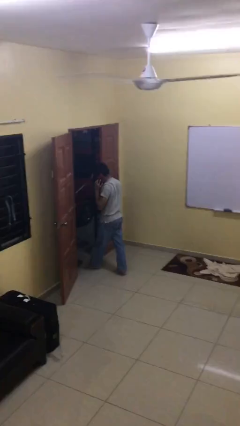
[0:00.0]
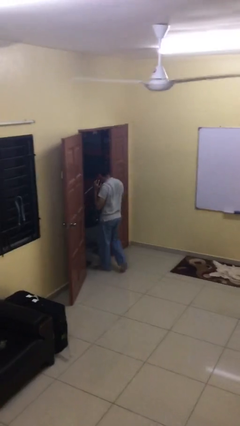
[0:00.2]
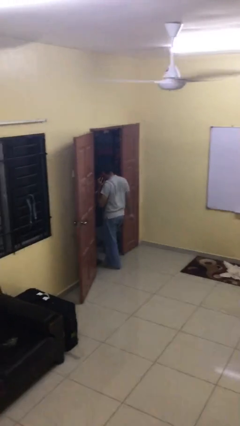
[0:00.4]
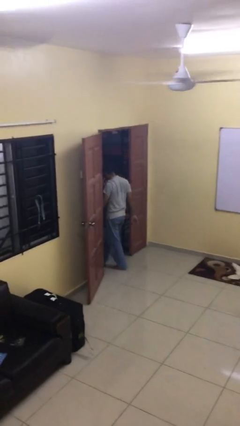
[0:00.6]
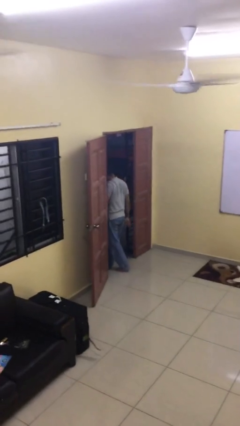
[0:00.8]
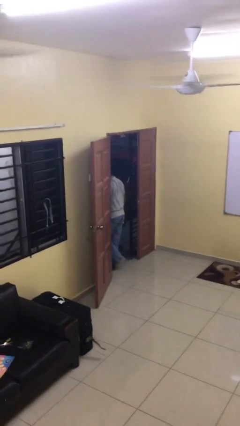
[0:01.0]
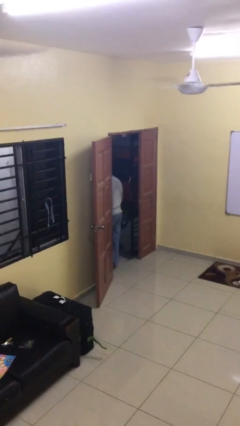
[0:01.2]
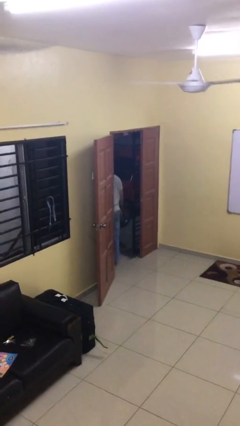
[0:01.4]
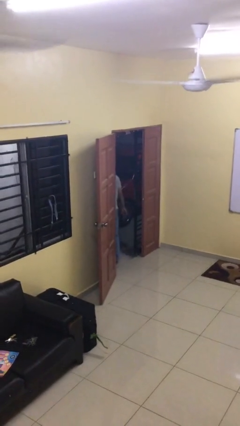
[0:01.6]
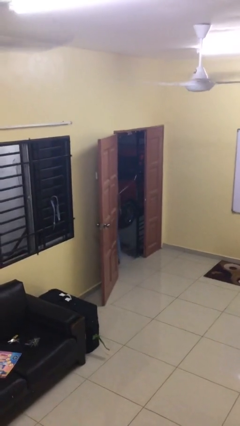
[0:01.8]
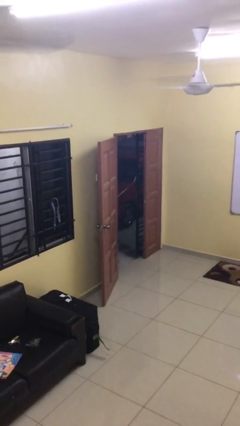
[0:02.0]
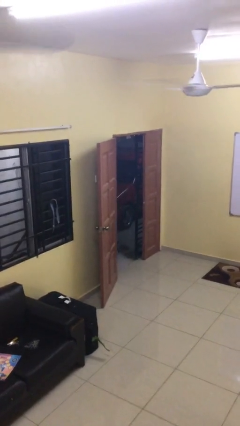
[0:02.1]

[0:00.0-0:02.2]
person exits scene through structure

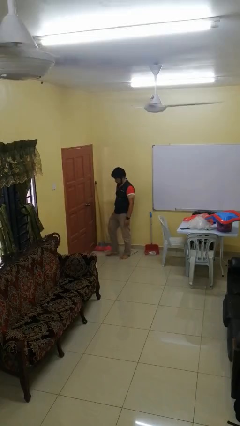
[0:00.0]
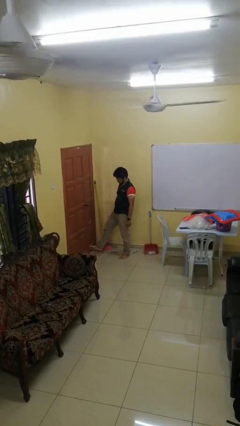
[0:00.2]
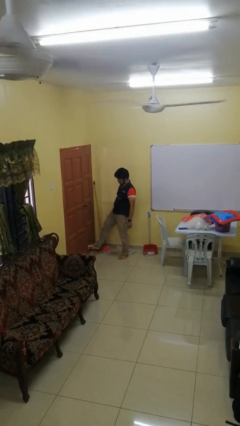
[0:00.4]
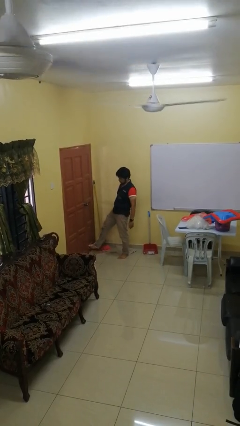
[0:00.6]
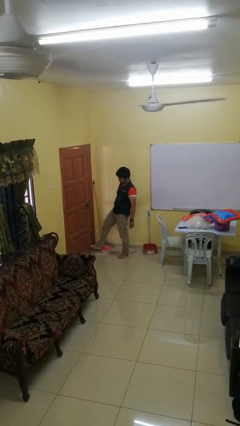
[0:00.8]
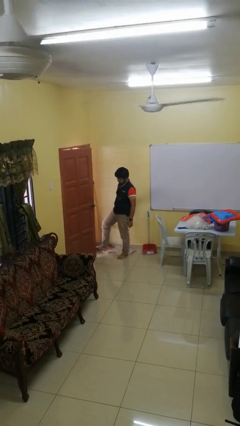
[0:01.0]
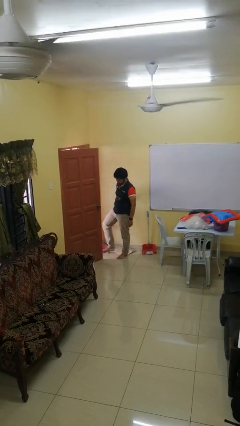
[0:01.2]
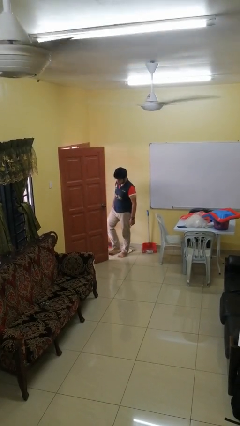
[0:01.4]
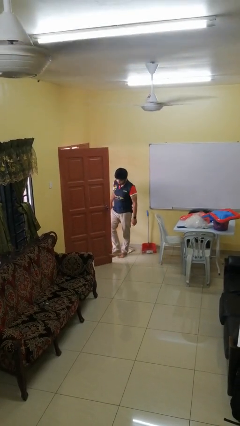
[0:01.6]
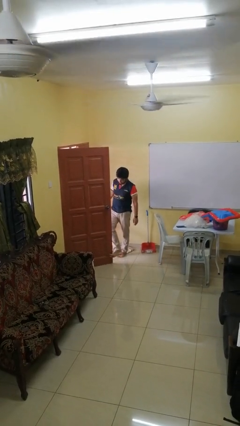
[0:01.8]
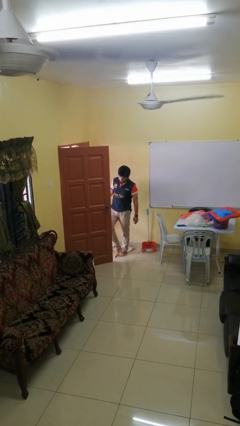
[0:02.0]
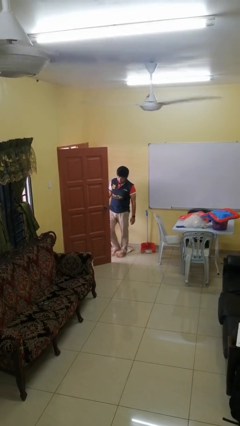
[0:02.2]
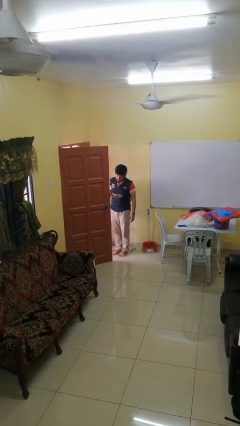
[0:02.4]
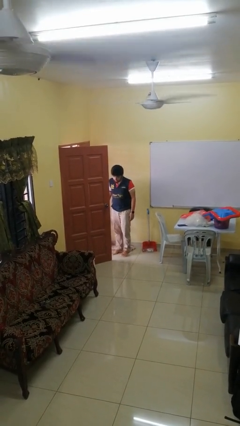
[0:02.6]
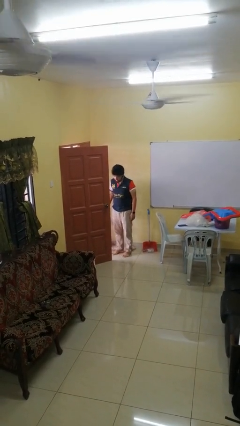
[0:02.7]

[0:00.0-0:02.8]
person opens facility door

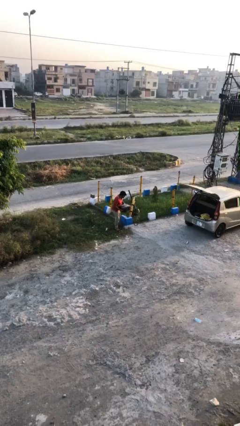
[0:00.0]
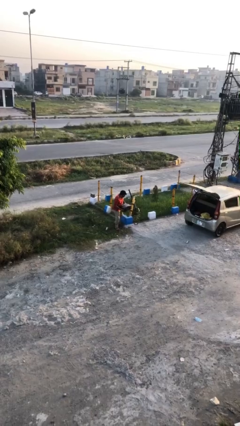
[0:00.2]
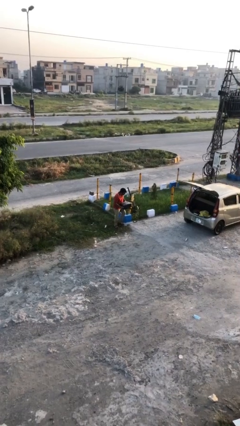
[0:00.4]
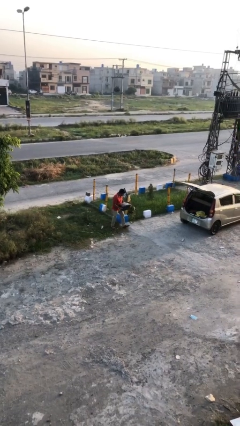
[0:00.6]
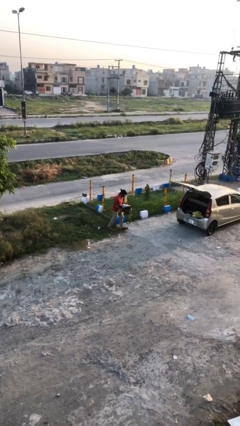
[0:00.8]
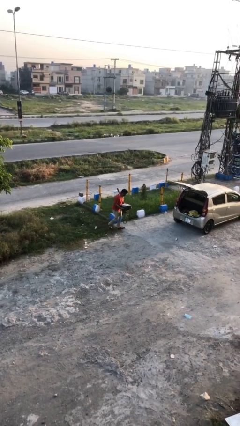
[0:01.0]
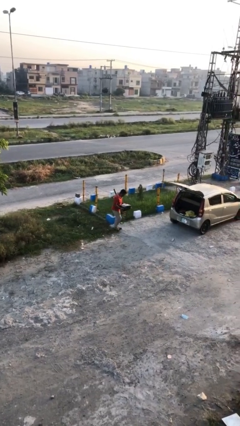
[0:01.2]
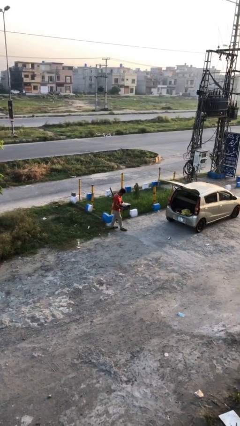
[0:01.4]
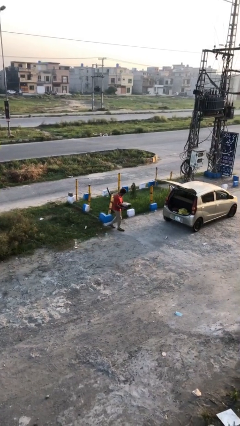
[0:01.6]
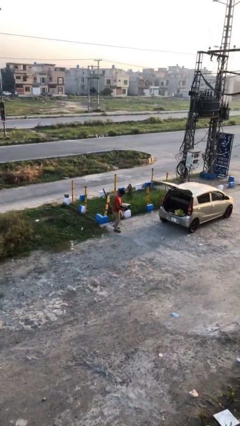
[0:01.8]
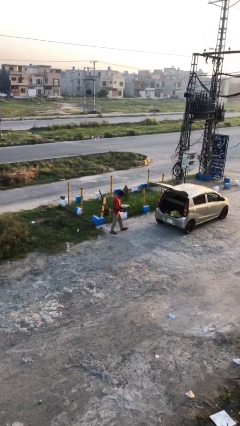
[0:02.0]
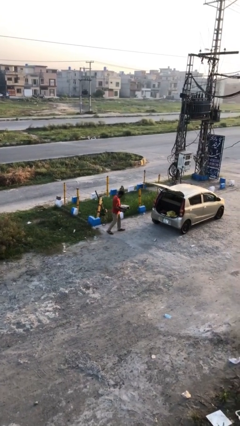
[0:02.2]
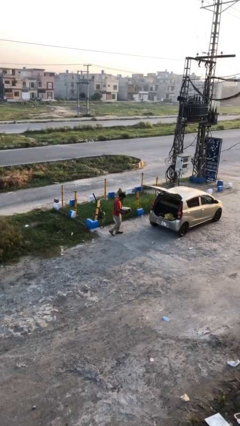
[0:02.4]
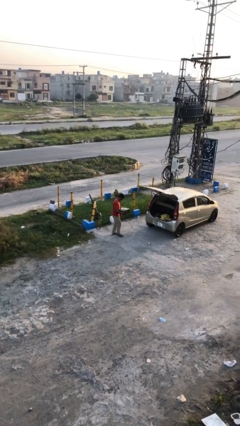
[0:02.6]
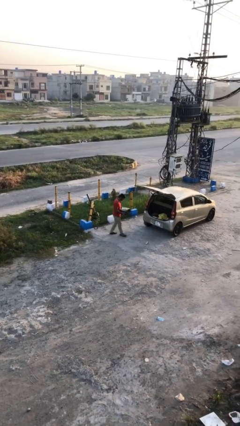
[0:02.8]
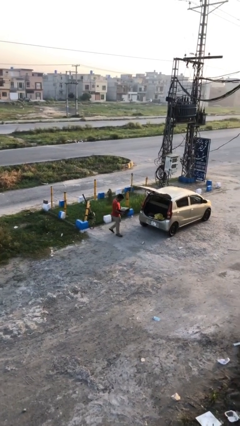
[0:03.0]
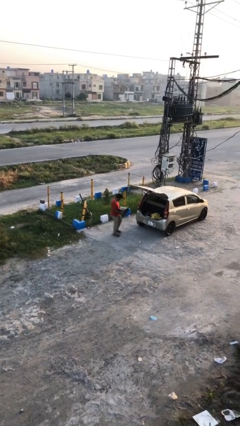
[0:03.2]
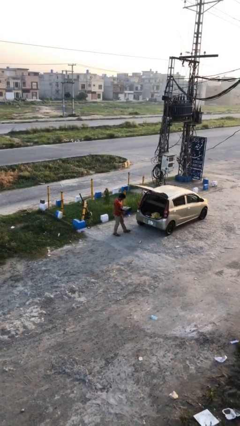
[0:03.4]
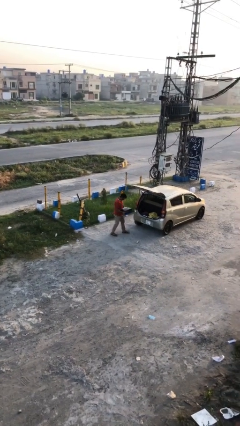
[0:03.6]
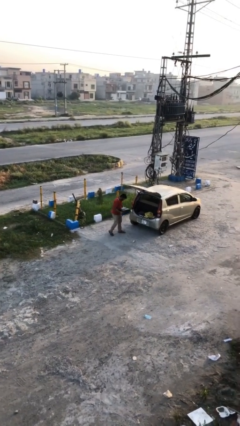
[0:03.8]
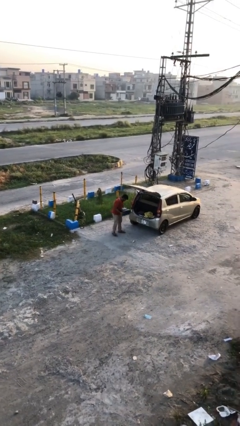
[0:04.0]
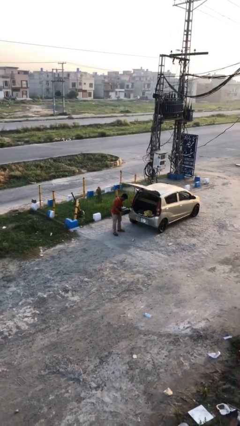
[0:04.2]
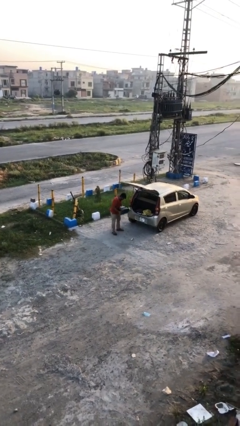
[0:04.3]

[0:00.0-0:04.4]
person carries heavy object

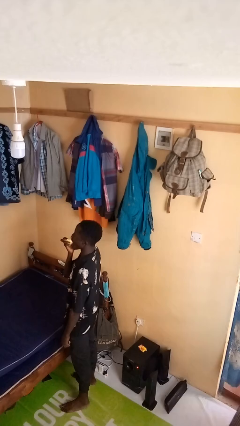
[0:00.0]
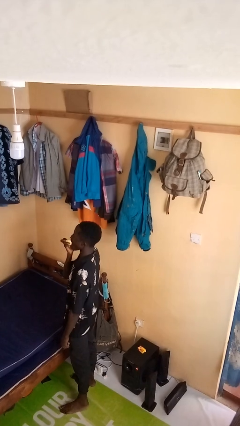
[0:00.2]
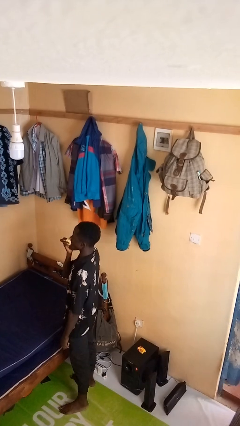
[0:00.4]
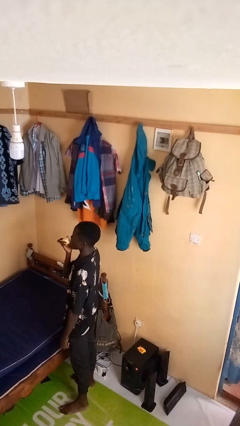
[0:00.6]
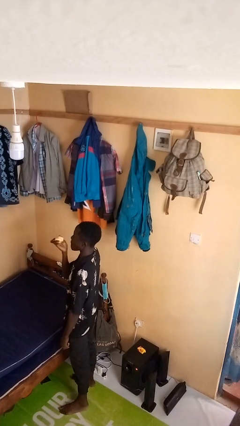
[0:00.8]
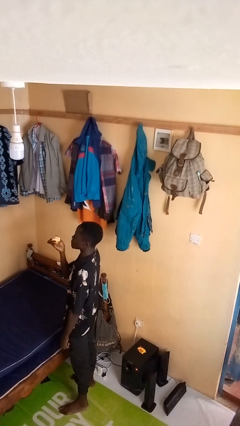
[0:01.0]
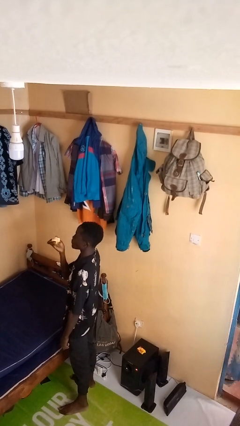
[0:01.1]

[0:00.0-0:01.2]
person eats apple

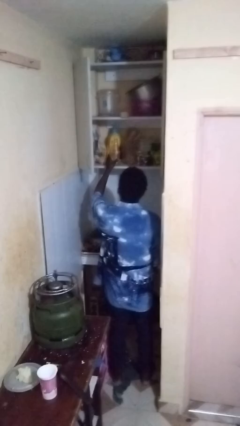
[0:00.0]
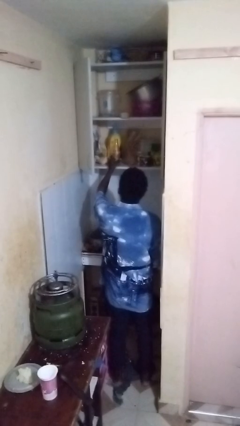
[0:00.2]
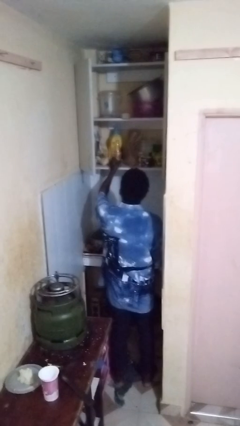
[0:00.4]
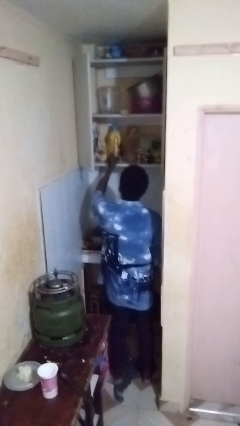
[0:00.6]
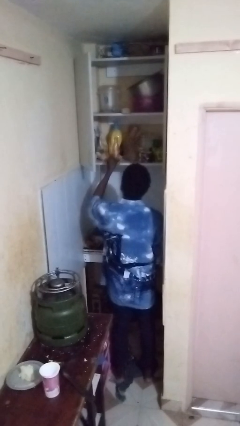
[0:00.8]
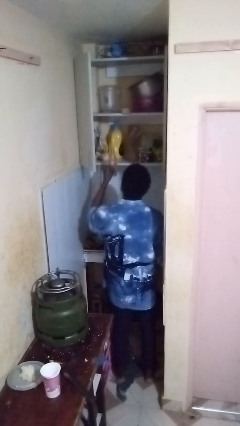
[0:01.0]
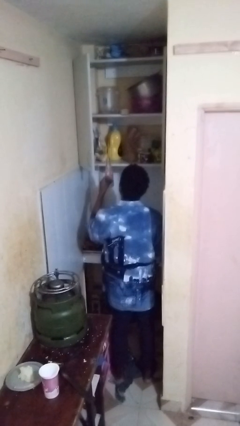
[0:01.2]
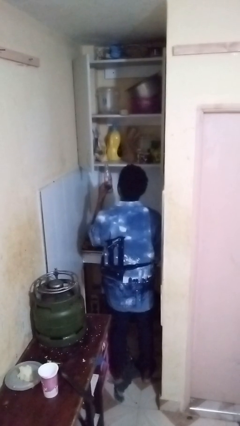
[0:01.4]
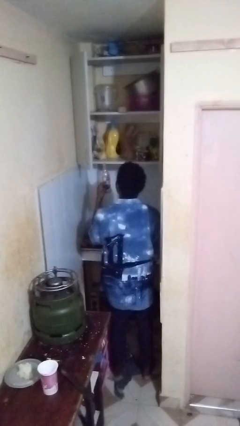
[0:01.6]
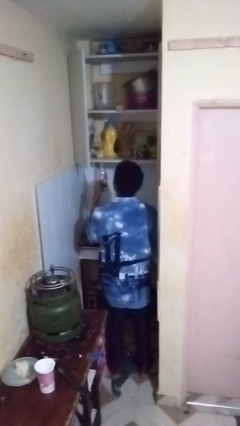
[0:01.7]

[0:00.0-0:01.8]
person picks up object from cabinet

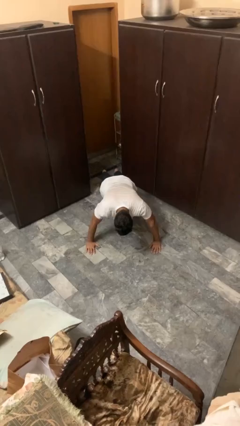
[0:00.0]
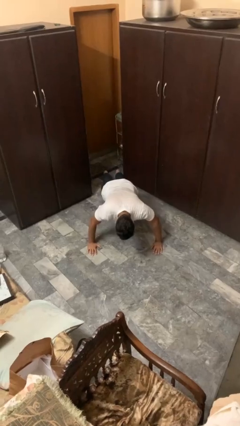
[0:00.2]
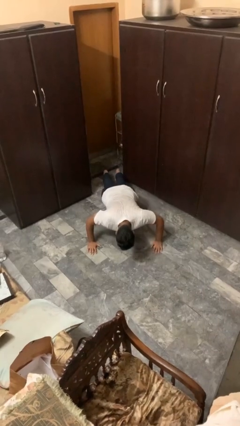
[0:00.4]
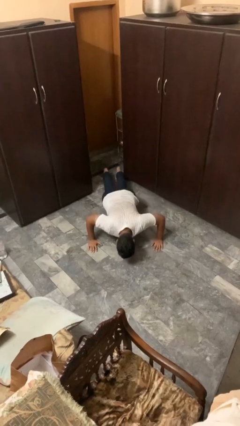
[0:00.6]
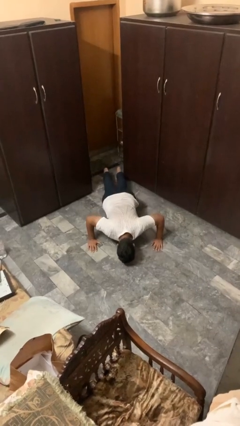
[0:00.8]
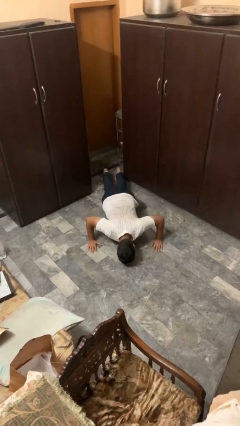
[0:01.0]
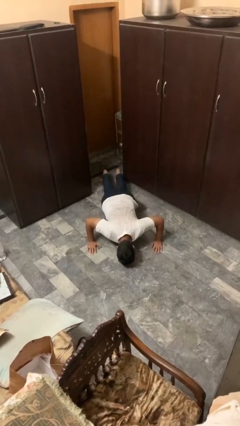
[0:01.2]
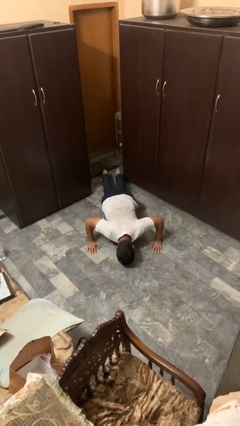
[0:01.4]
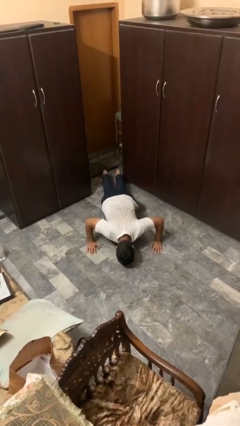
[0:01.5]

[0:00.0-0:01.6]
person exercises with pushup

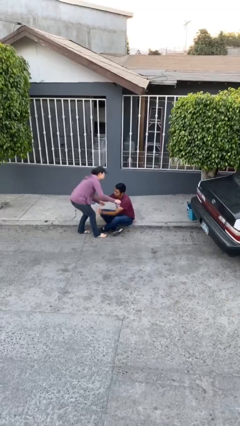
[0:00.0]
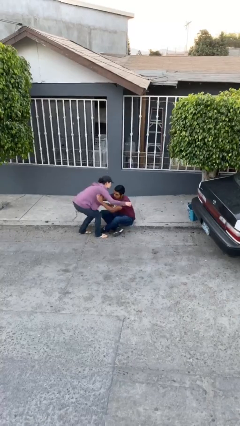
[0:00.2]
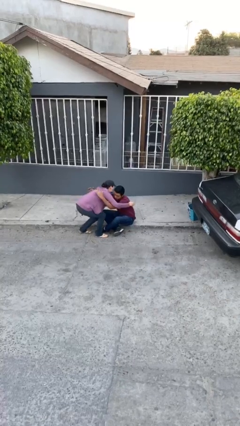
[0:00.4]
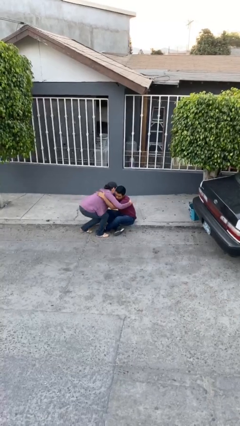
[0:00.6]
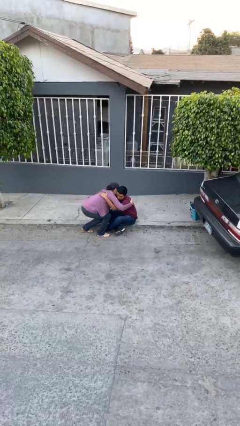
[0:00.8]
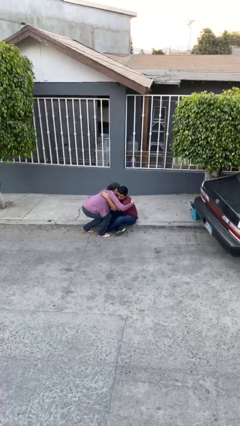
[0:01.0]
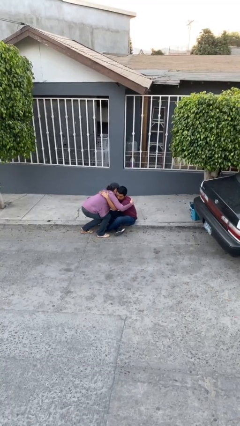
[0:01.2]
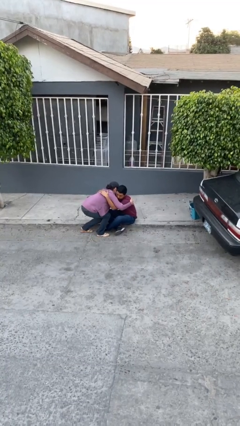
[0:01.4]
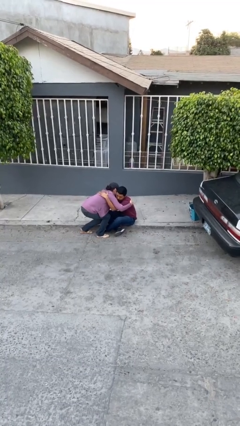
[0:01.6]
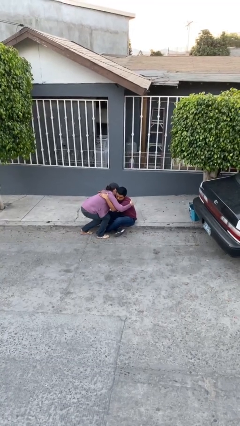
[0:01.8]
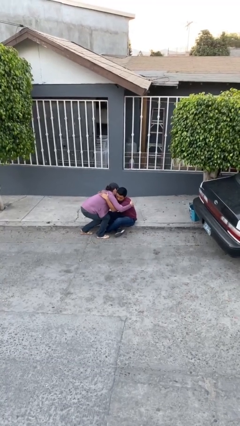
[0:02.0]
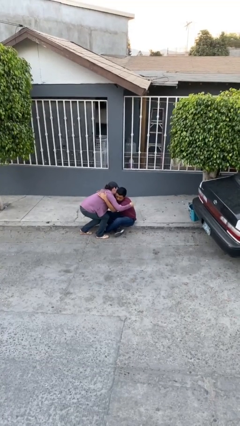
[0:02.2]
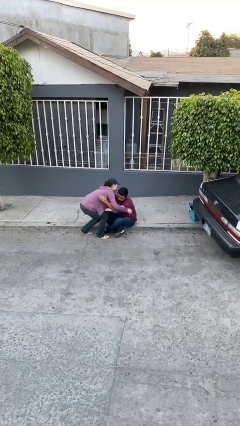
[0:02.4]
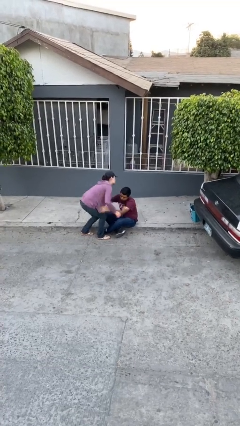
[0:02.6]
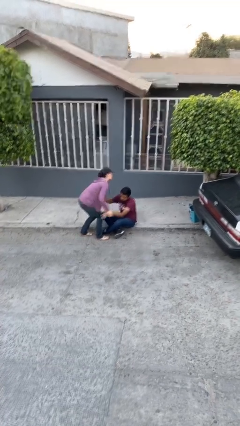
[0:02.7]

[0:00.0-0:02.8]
person embraces person
